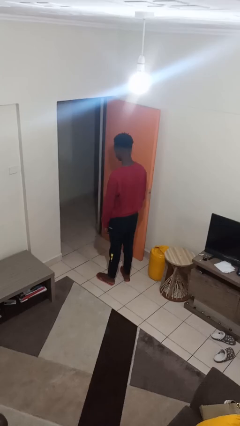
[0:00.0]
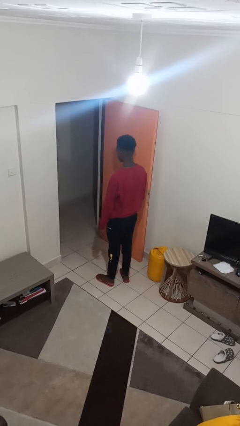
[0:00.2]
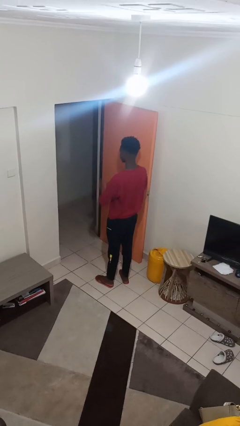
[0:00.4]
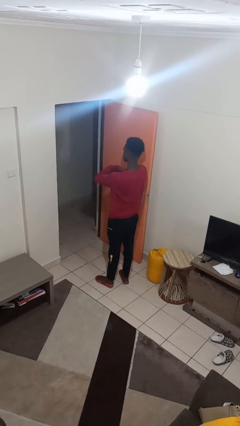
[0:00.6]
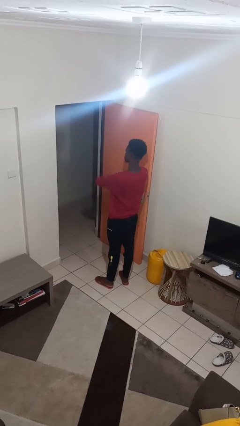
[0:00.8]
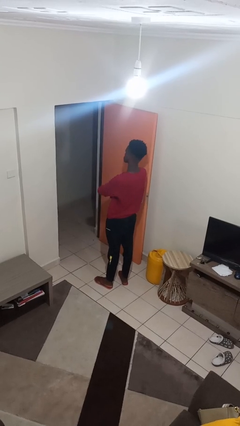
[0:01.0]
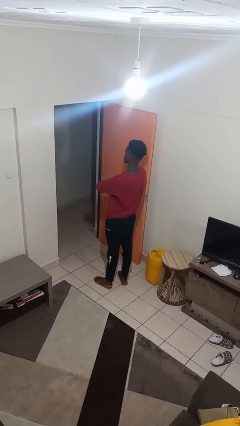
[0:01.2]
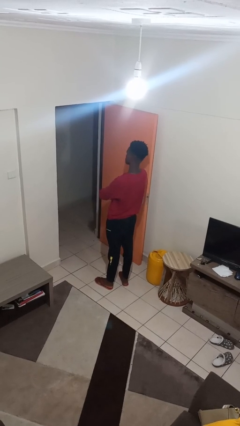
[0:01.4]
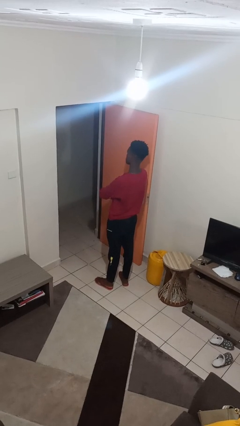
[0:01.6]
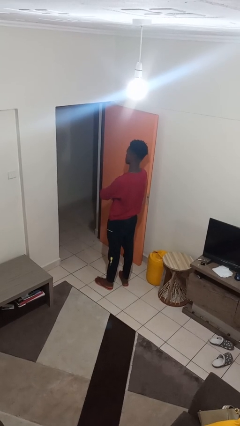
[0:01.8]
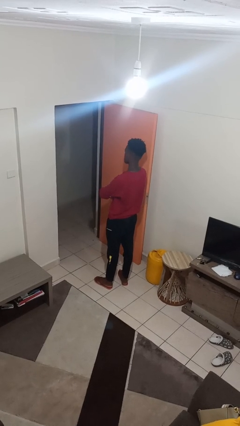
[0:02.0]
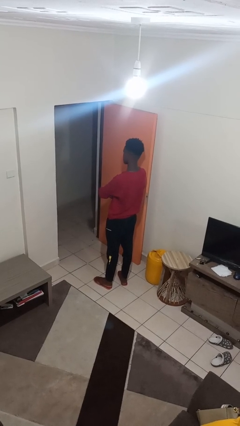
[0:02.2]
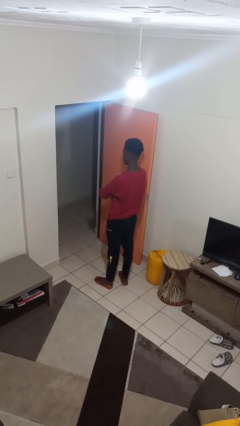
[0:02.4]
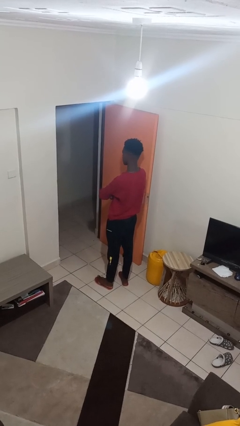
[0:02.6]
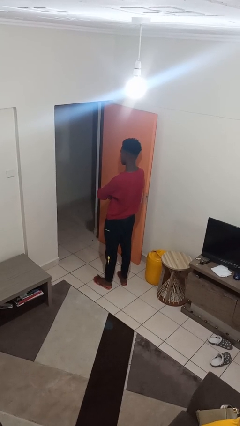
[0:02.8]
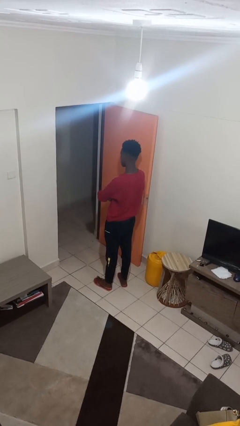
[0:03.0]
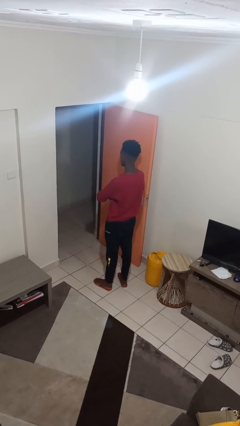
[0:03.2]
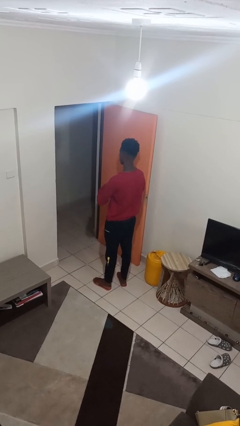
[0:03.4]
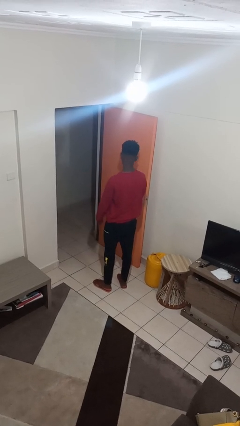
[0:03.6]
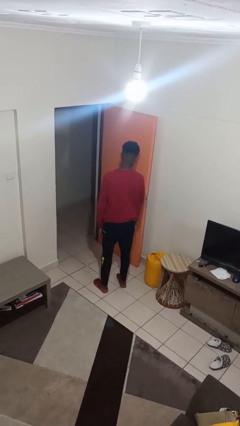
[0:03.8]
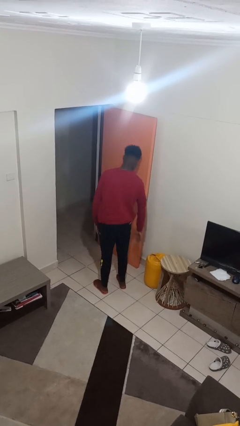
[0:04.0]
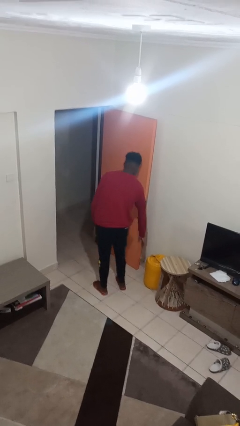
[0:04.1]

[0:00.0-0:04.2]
person crosses arms

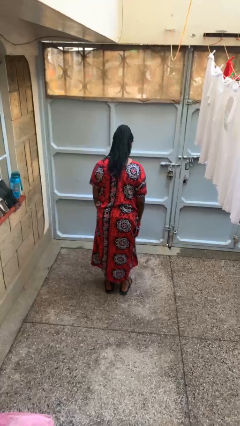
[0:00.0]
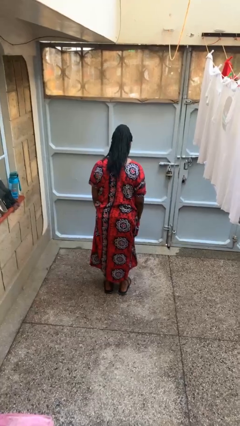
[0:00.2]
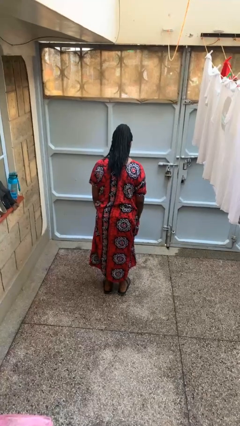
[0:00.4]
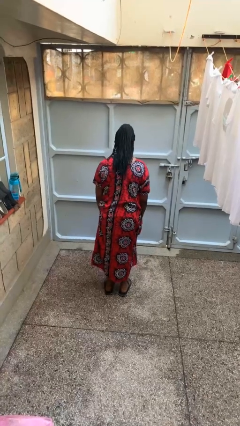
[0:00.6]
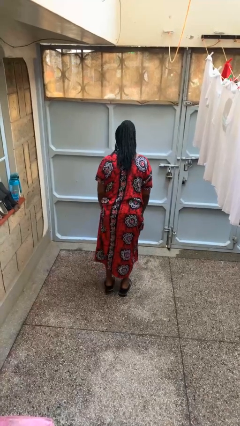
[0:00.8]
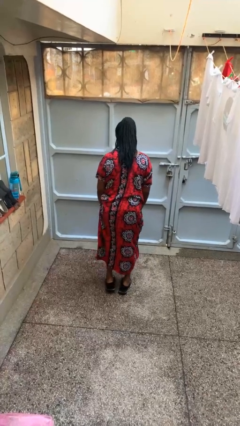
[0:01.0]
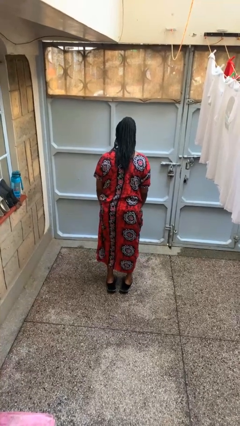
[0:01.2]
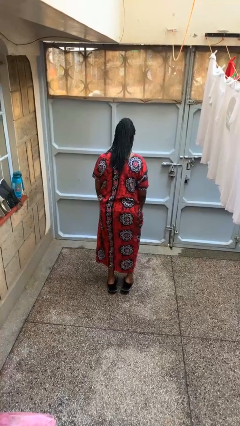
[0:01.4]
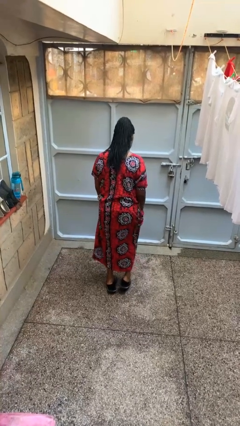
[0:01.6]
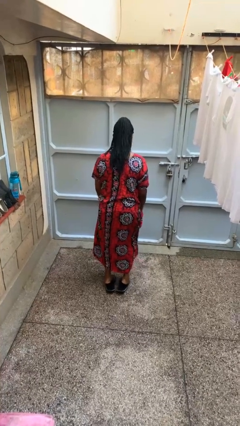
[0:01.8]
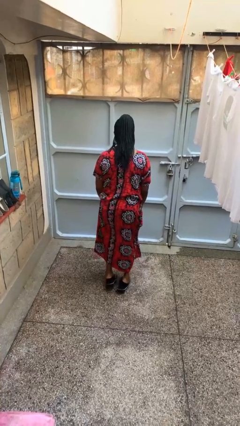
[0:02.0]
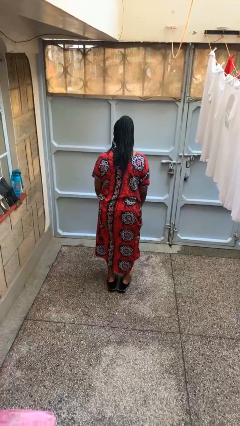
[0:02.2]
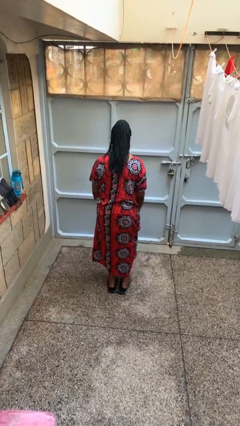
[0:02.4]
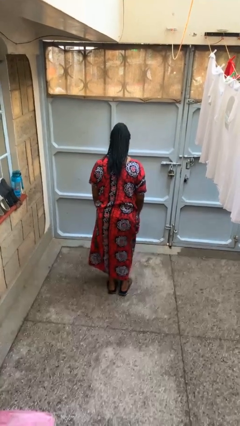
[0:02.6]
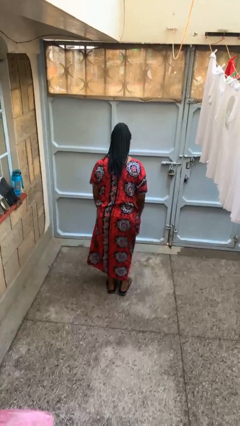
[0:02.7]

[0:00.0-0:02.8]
person walks tiptoe

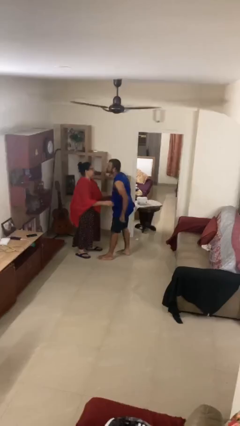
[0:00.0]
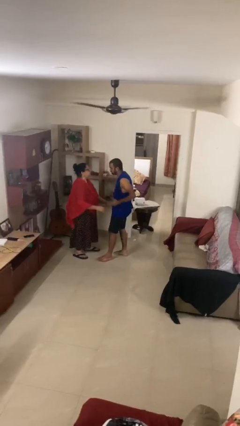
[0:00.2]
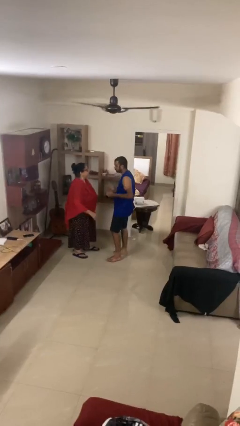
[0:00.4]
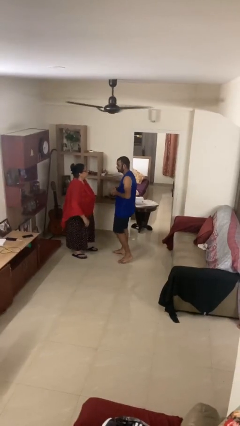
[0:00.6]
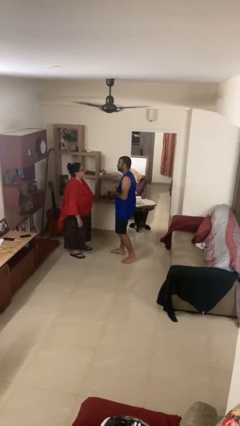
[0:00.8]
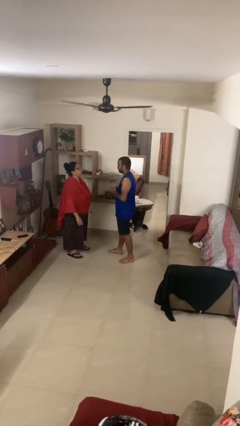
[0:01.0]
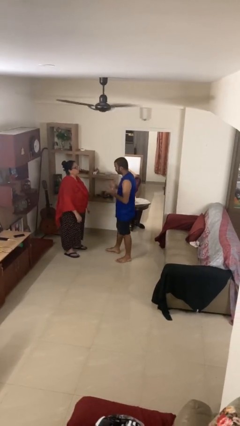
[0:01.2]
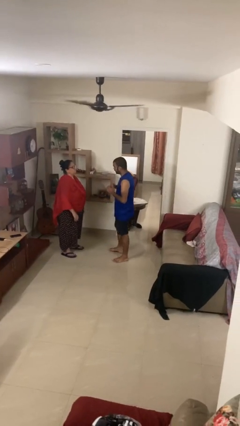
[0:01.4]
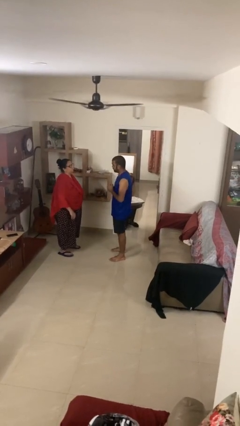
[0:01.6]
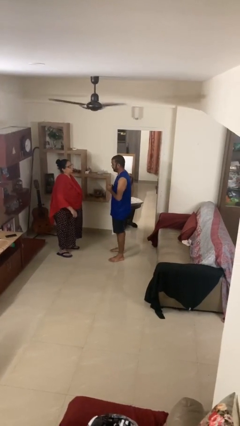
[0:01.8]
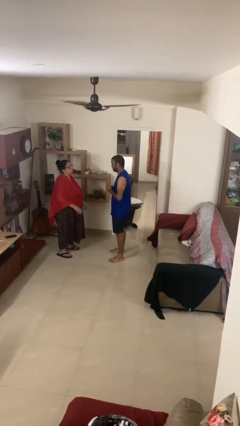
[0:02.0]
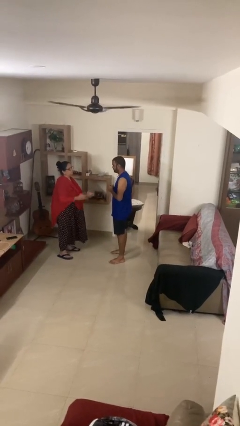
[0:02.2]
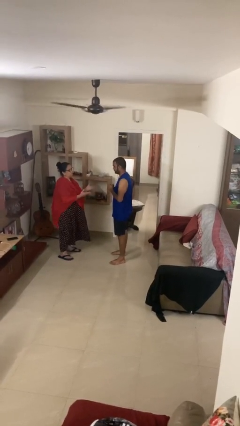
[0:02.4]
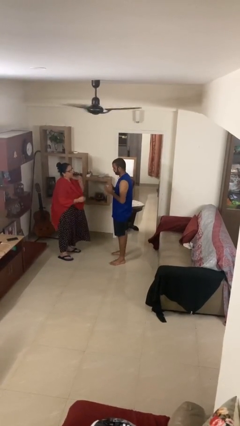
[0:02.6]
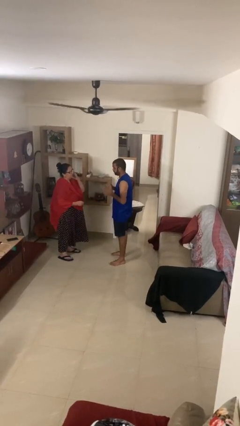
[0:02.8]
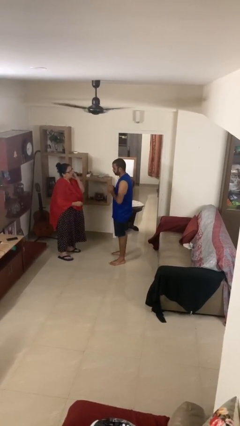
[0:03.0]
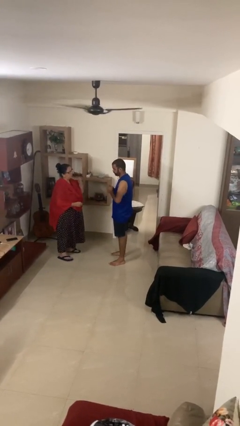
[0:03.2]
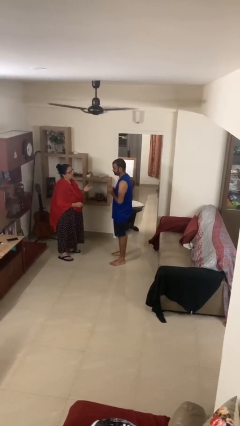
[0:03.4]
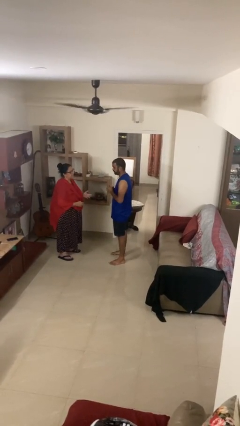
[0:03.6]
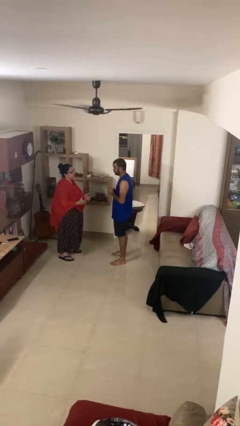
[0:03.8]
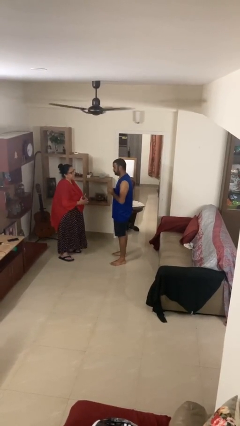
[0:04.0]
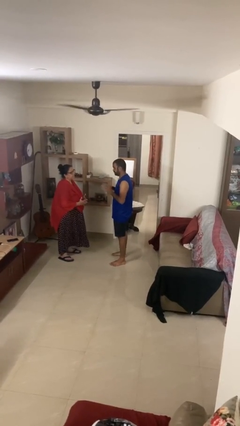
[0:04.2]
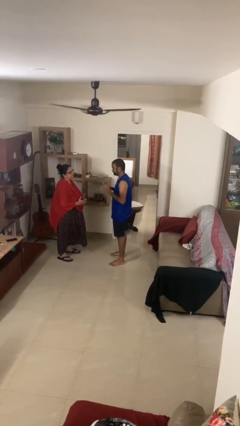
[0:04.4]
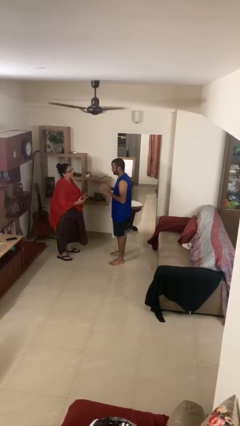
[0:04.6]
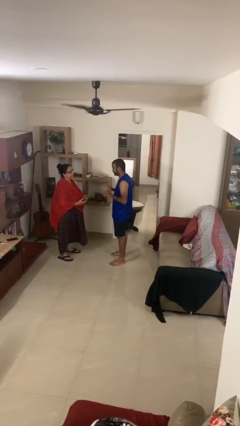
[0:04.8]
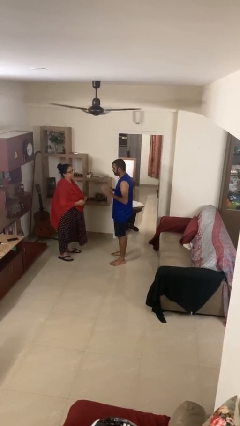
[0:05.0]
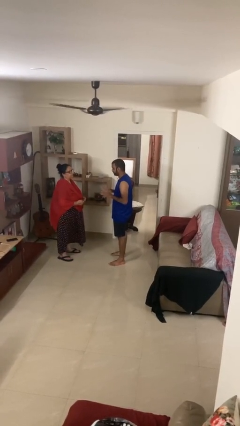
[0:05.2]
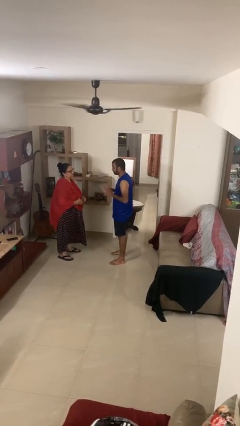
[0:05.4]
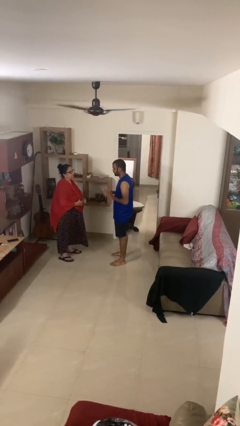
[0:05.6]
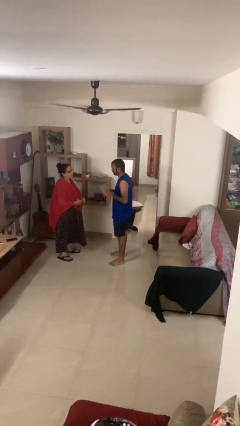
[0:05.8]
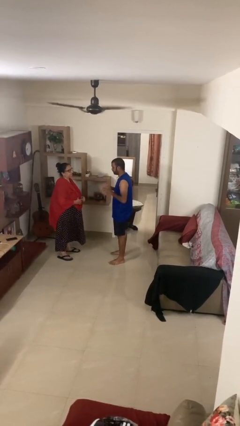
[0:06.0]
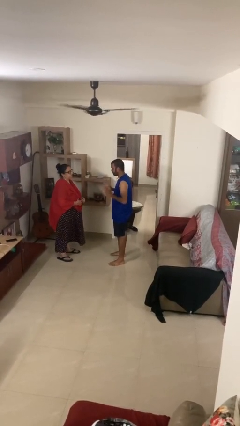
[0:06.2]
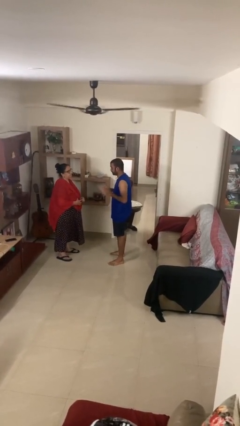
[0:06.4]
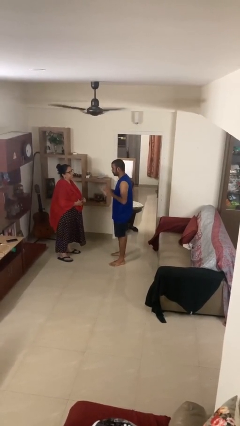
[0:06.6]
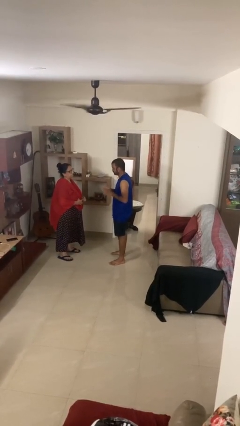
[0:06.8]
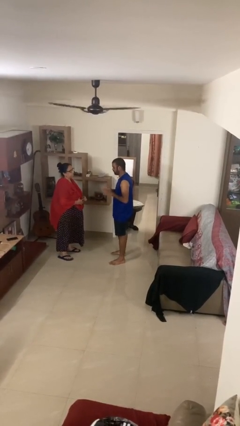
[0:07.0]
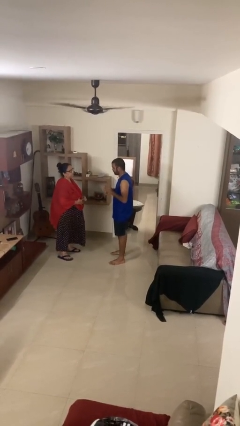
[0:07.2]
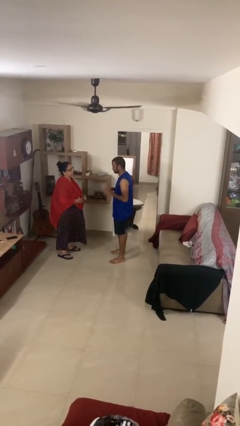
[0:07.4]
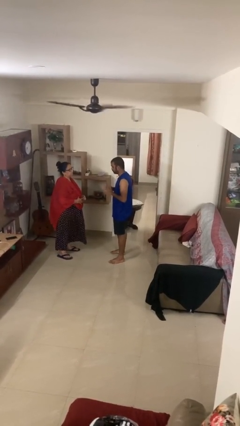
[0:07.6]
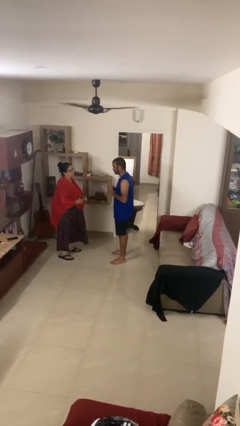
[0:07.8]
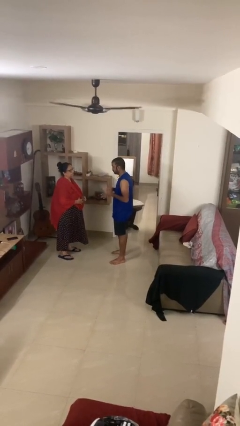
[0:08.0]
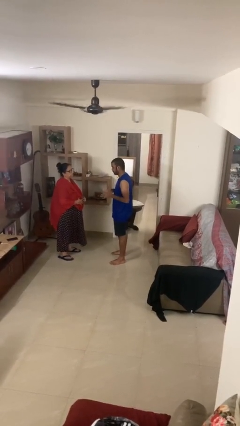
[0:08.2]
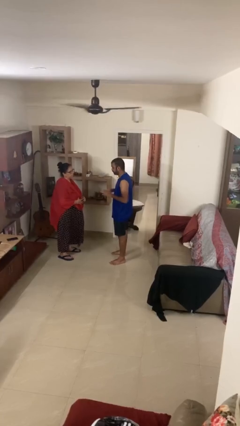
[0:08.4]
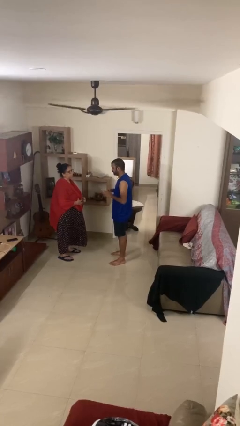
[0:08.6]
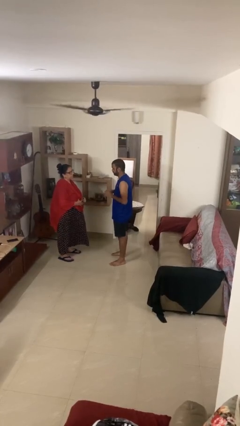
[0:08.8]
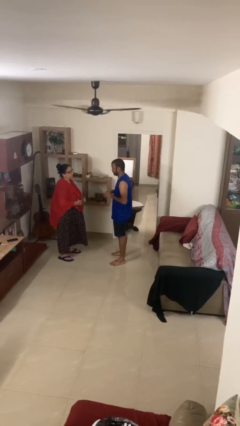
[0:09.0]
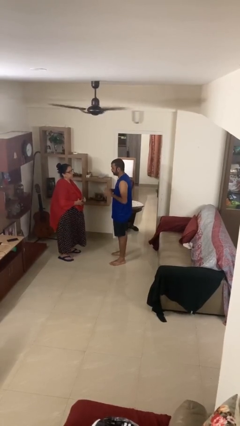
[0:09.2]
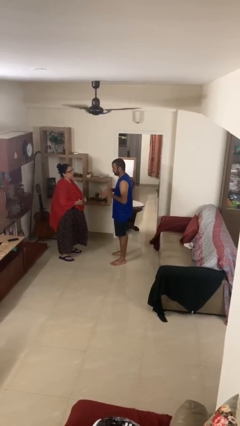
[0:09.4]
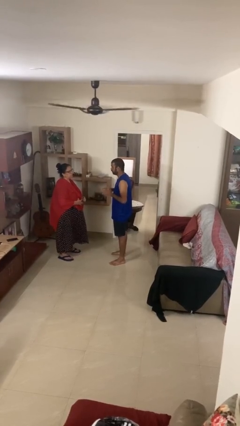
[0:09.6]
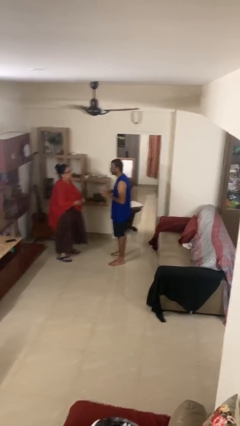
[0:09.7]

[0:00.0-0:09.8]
person talks to person

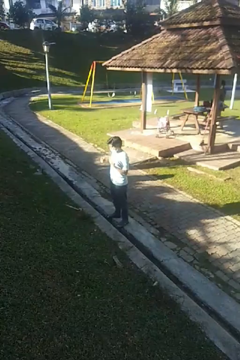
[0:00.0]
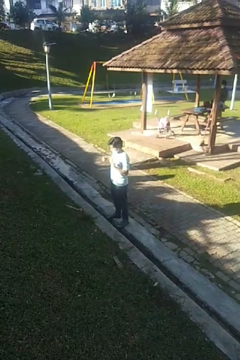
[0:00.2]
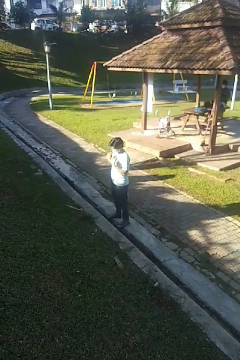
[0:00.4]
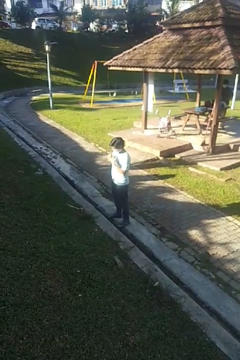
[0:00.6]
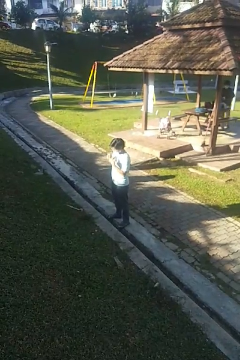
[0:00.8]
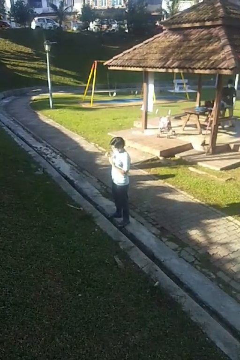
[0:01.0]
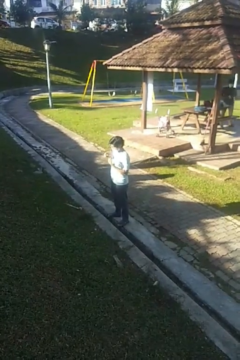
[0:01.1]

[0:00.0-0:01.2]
person takes off ring

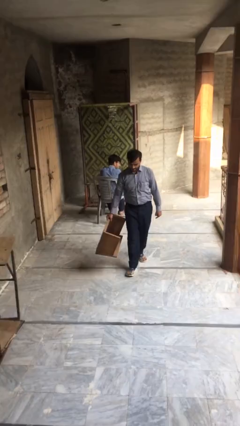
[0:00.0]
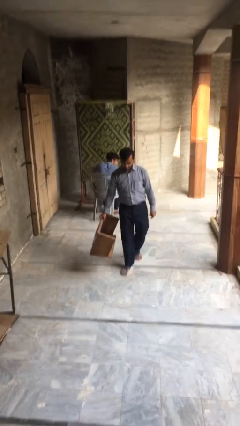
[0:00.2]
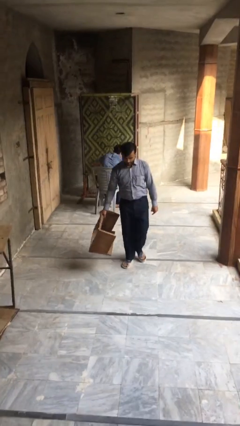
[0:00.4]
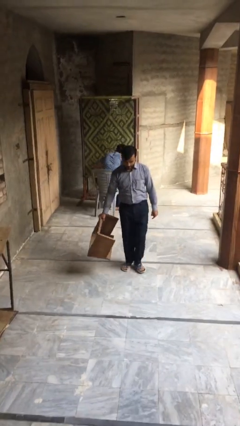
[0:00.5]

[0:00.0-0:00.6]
person steals object from person
